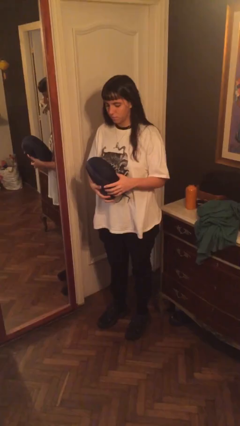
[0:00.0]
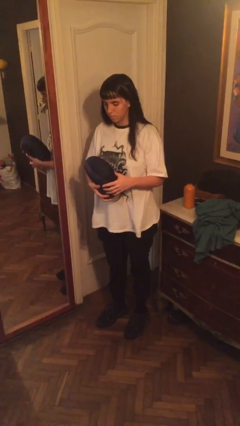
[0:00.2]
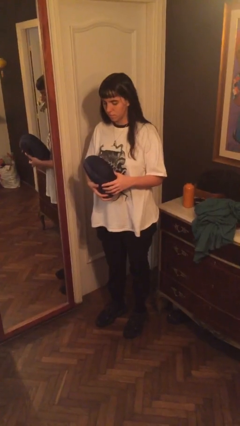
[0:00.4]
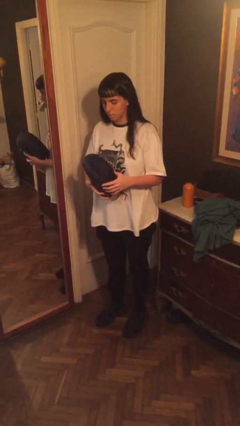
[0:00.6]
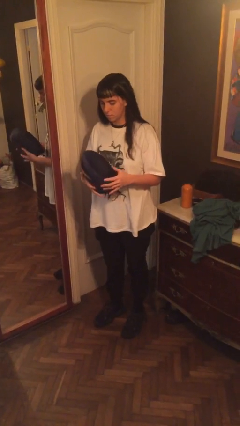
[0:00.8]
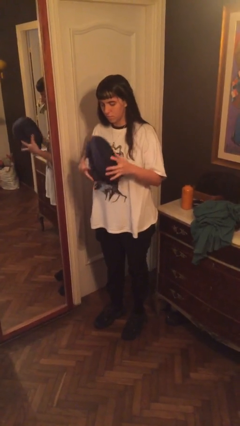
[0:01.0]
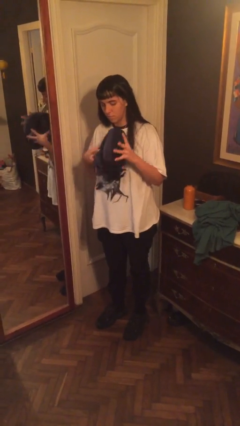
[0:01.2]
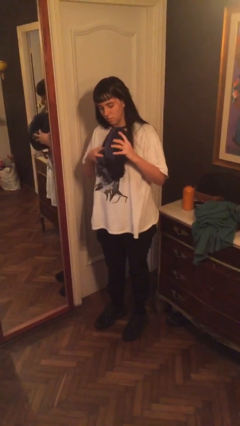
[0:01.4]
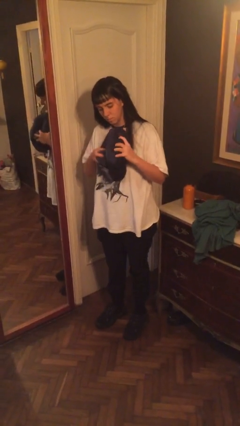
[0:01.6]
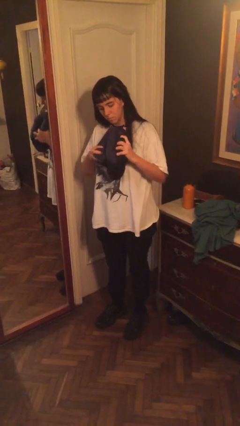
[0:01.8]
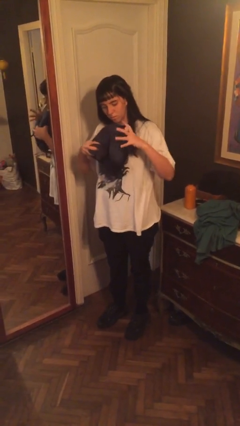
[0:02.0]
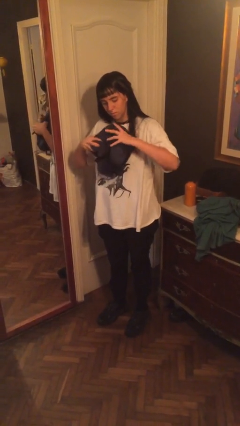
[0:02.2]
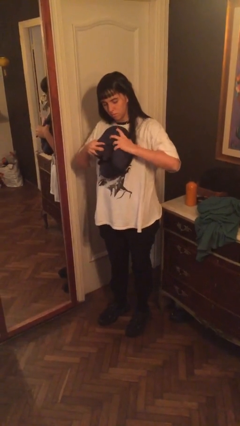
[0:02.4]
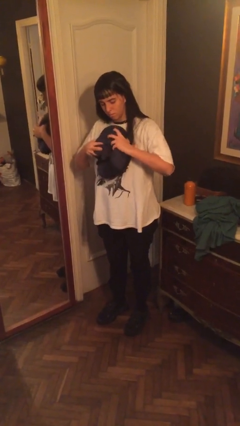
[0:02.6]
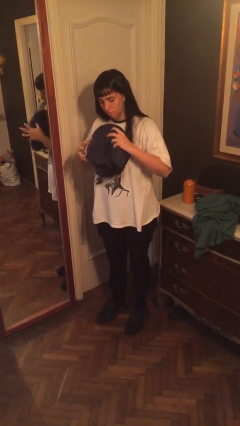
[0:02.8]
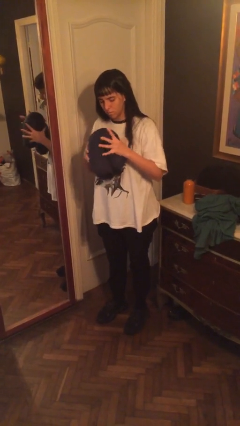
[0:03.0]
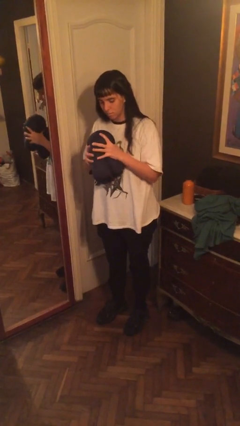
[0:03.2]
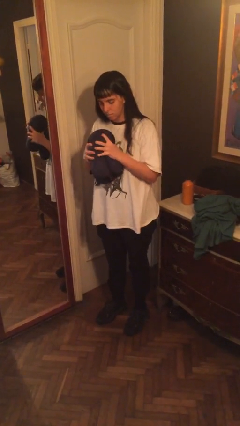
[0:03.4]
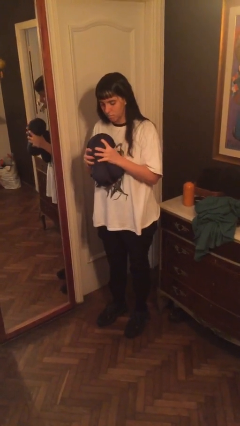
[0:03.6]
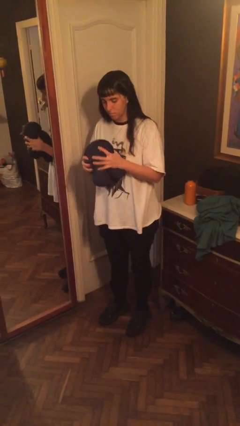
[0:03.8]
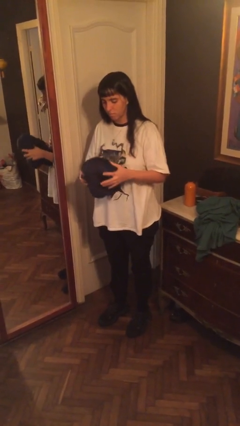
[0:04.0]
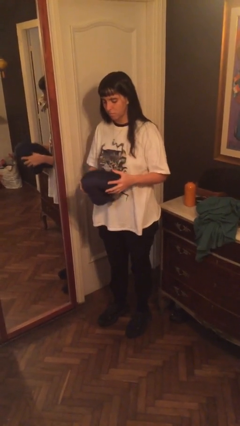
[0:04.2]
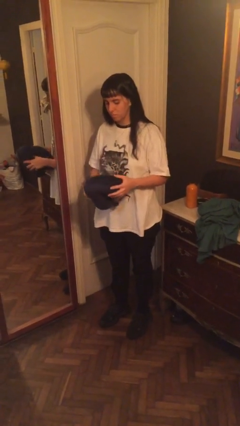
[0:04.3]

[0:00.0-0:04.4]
person squeezes object

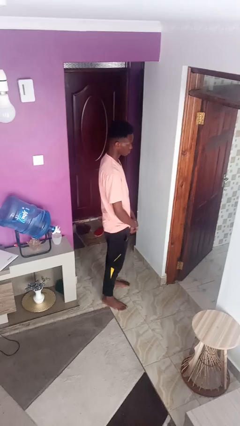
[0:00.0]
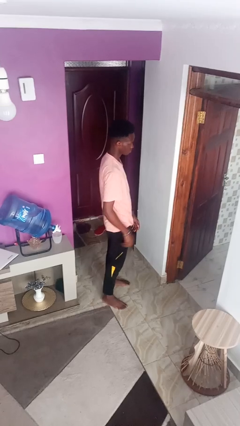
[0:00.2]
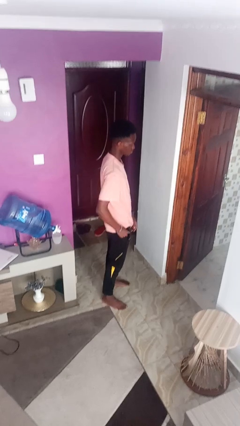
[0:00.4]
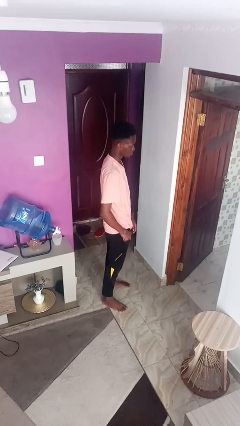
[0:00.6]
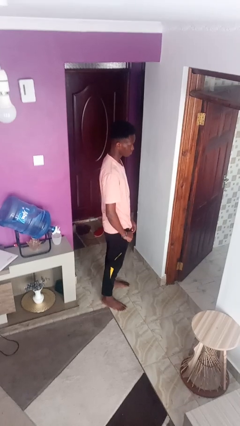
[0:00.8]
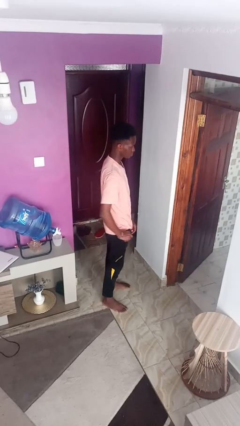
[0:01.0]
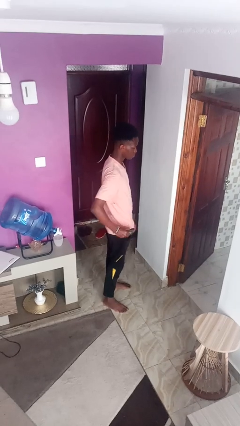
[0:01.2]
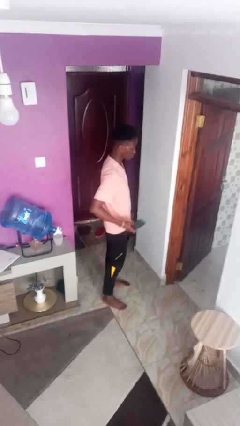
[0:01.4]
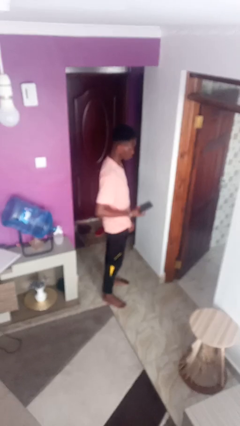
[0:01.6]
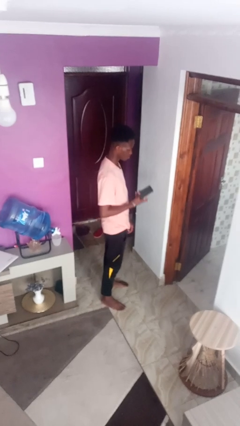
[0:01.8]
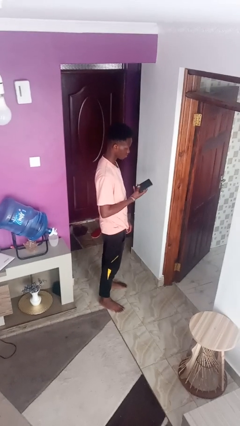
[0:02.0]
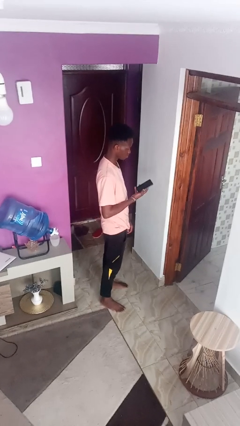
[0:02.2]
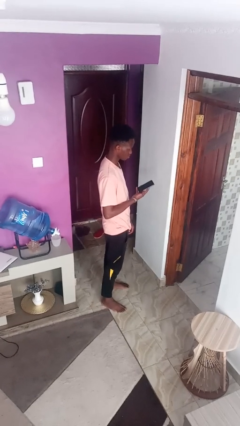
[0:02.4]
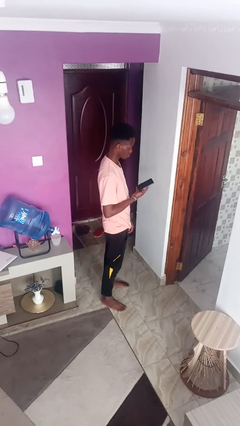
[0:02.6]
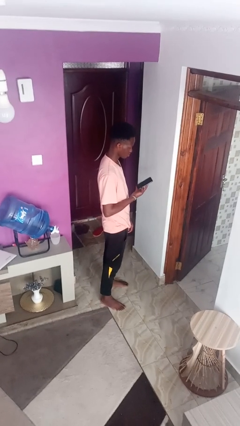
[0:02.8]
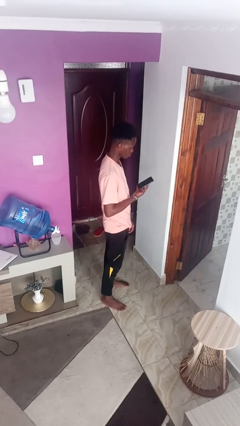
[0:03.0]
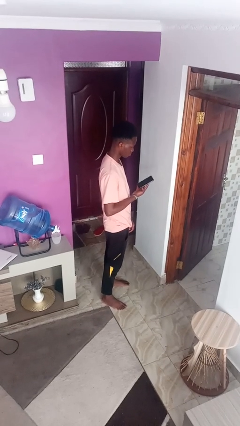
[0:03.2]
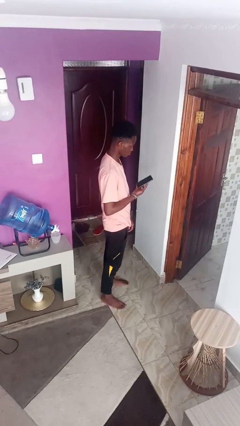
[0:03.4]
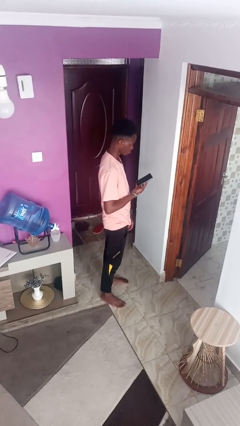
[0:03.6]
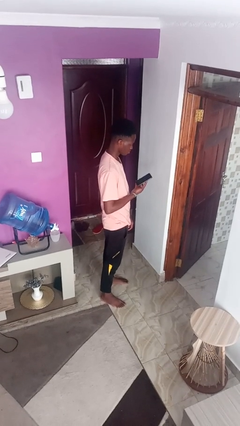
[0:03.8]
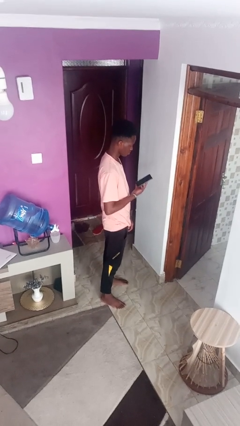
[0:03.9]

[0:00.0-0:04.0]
person takes phone from pocket

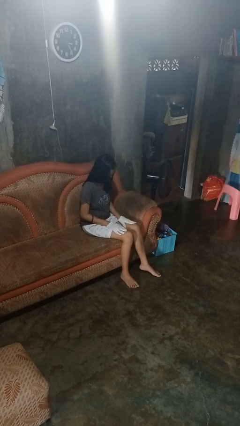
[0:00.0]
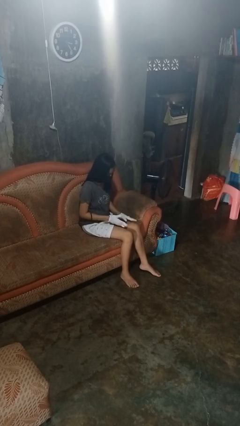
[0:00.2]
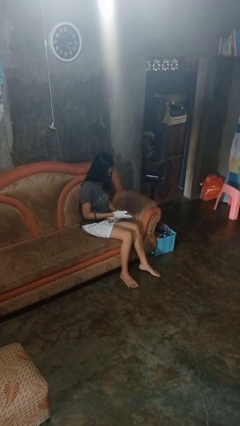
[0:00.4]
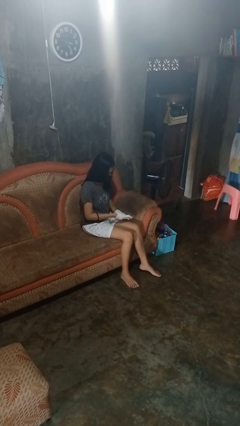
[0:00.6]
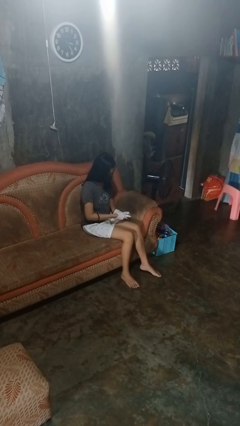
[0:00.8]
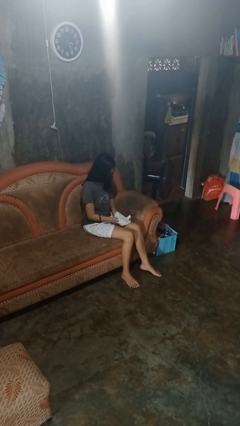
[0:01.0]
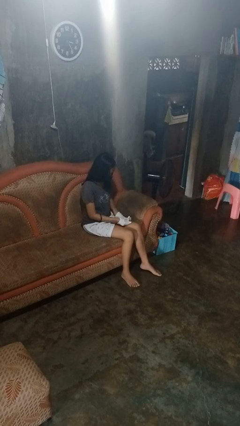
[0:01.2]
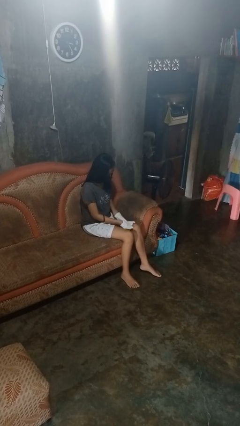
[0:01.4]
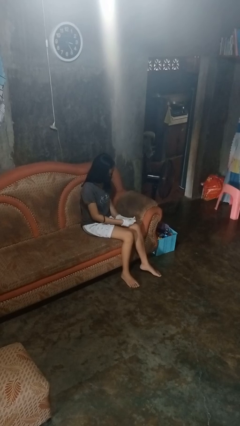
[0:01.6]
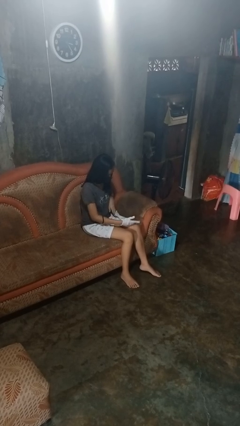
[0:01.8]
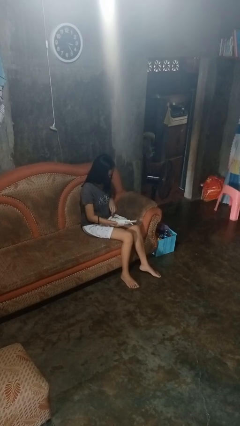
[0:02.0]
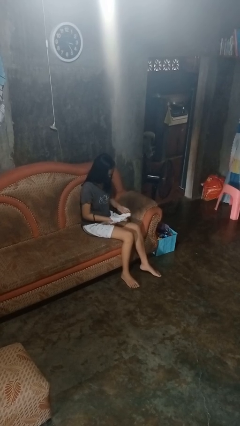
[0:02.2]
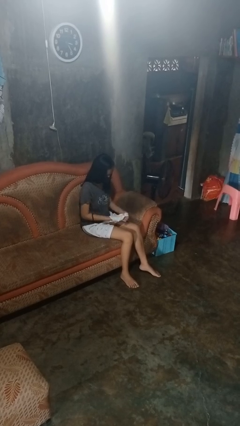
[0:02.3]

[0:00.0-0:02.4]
person takes off gloves

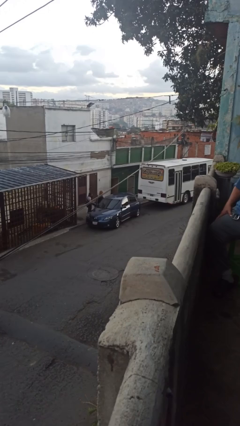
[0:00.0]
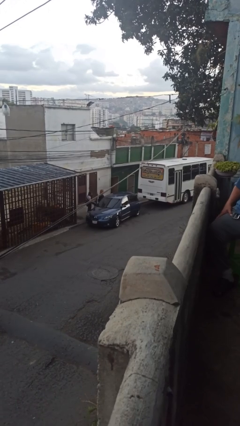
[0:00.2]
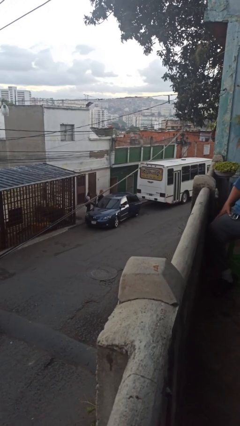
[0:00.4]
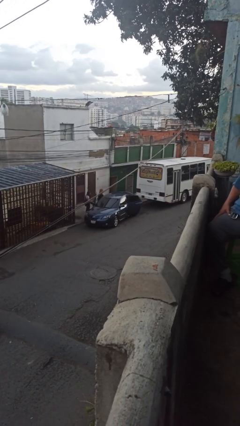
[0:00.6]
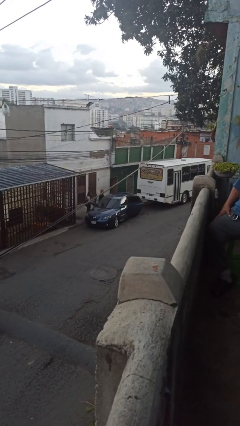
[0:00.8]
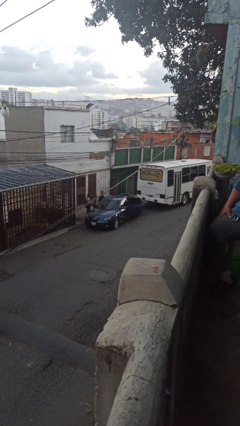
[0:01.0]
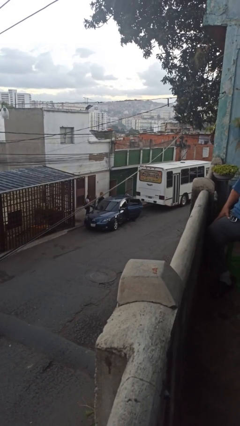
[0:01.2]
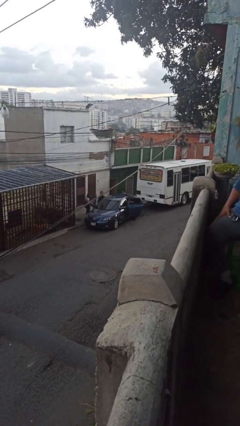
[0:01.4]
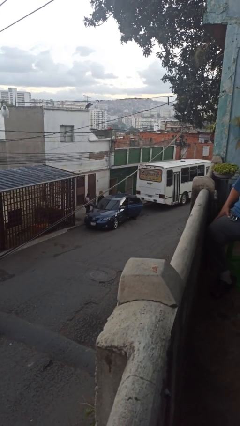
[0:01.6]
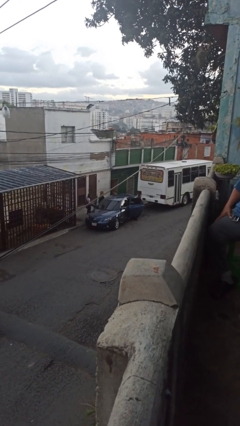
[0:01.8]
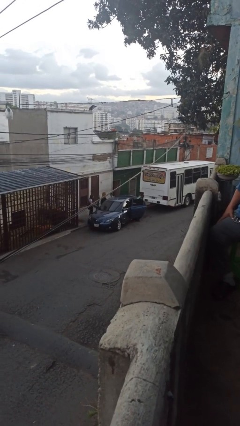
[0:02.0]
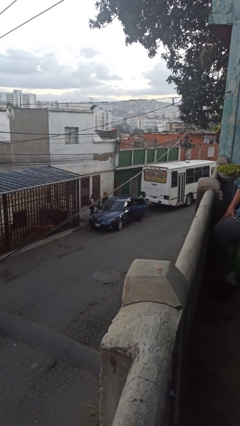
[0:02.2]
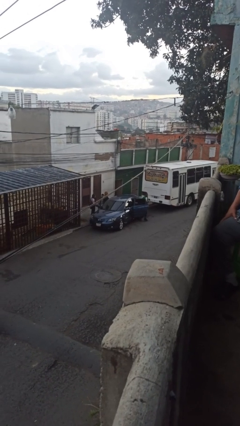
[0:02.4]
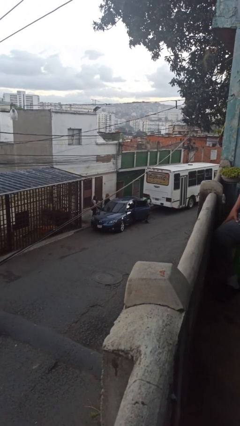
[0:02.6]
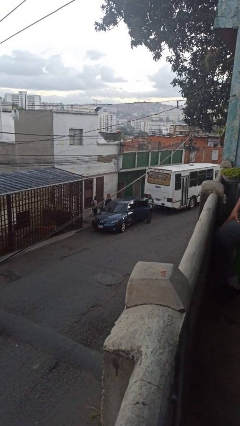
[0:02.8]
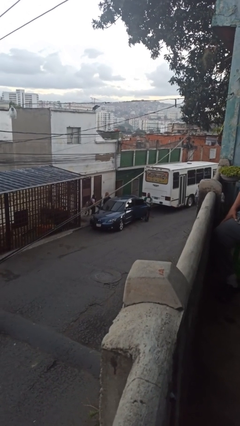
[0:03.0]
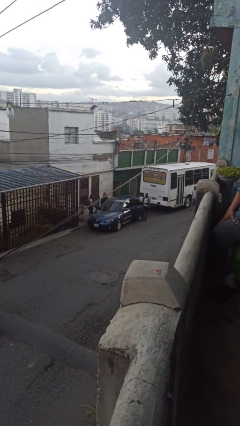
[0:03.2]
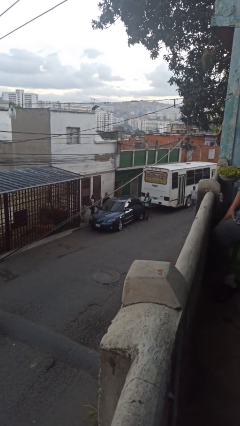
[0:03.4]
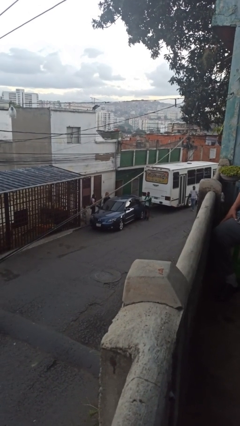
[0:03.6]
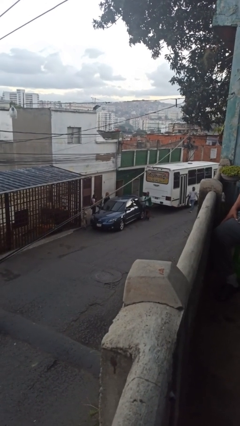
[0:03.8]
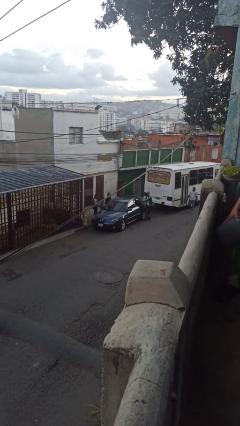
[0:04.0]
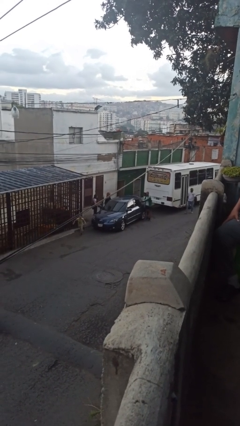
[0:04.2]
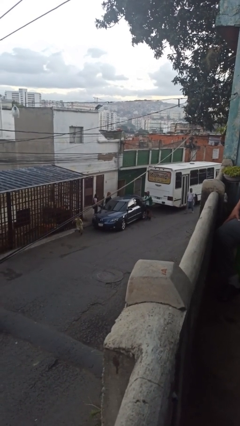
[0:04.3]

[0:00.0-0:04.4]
car drops off person

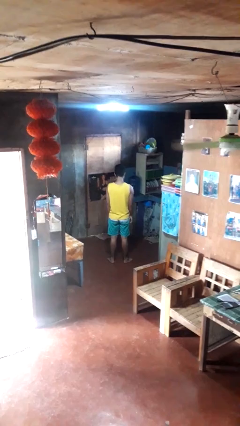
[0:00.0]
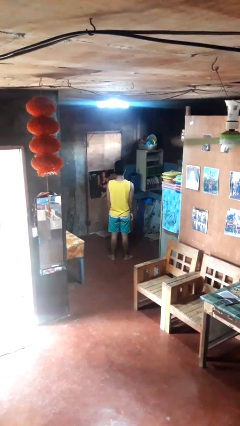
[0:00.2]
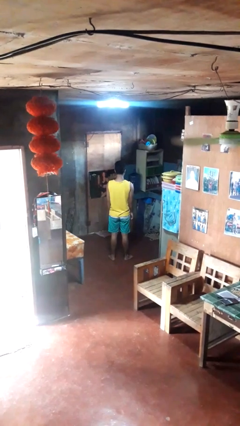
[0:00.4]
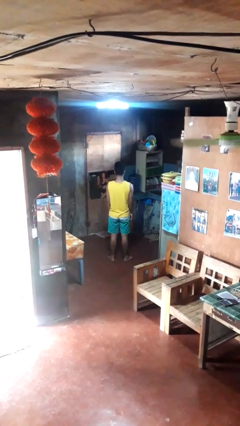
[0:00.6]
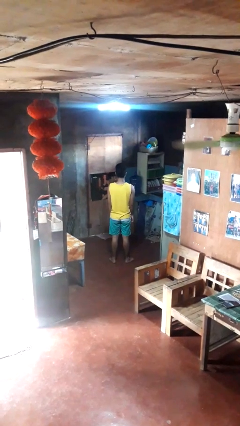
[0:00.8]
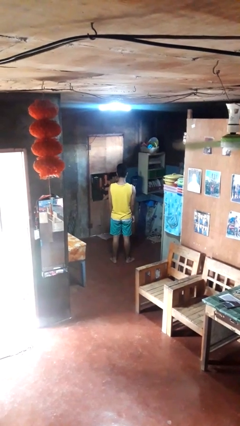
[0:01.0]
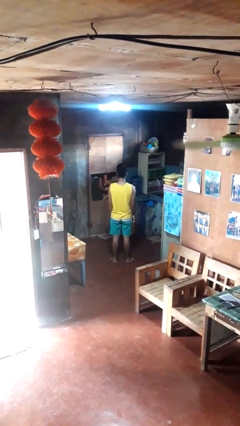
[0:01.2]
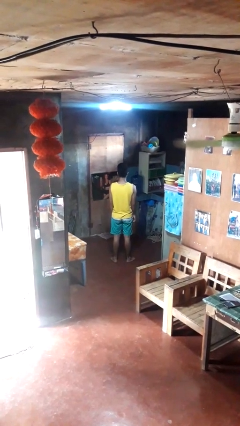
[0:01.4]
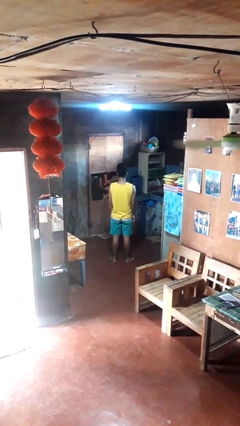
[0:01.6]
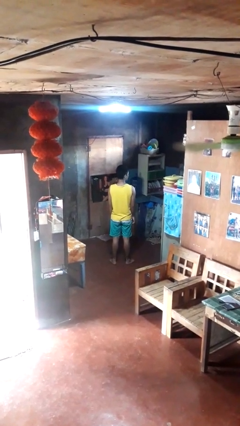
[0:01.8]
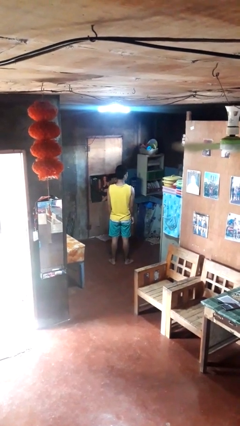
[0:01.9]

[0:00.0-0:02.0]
person nods head

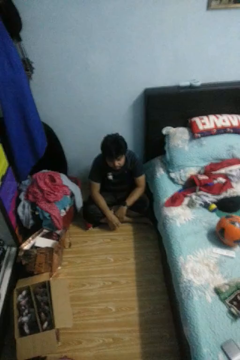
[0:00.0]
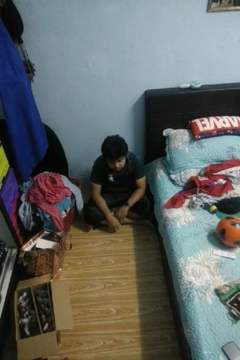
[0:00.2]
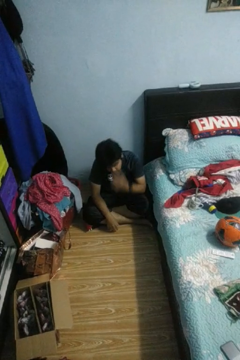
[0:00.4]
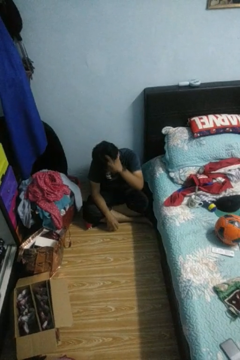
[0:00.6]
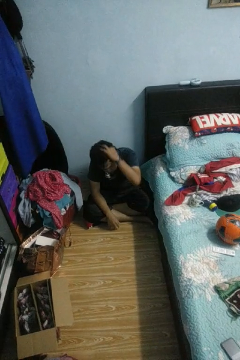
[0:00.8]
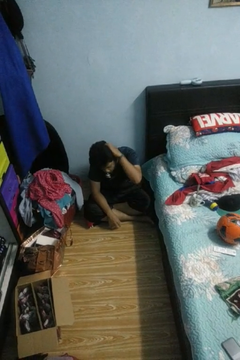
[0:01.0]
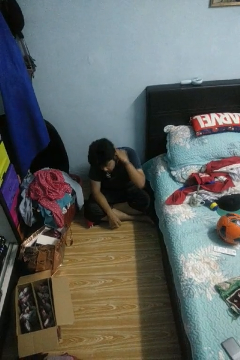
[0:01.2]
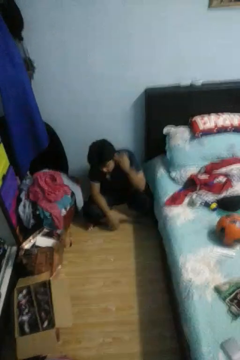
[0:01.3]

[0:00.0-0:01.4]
person strokes hair
